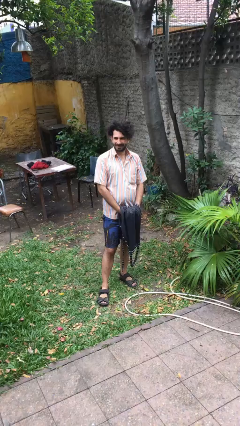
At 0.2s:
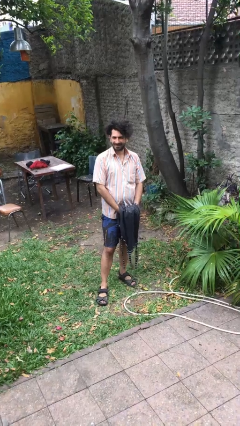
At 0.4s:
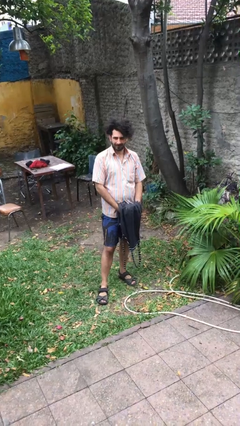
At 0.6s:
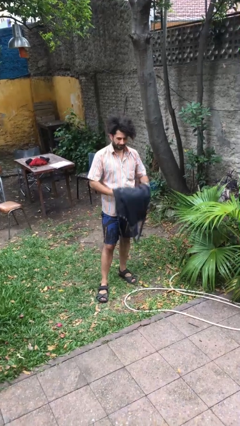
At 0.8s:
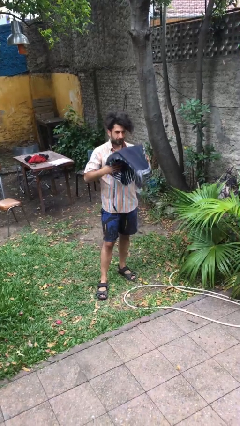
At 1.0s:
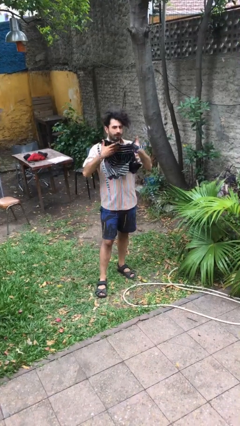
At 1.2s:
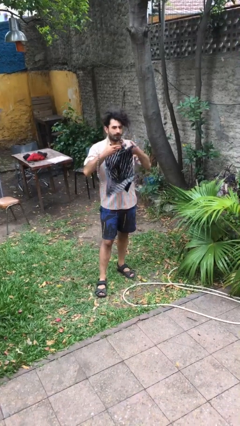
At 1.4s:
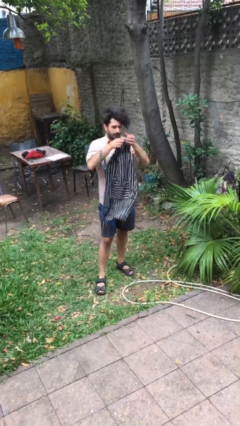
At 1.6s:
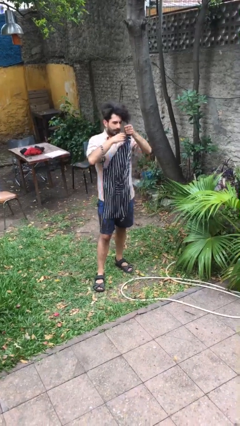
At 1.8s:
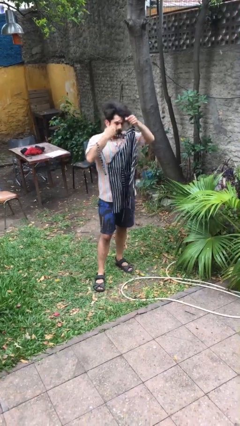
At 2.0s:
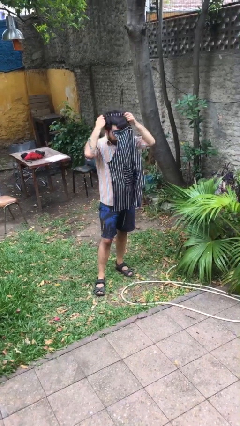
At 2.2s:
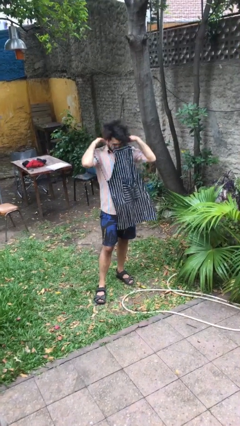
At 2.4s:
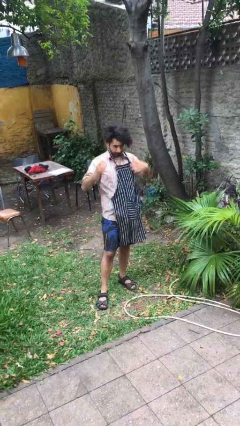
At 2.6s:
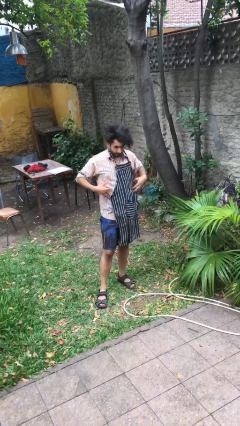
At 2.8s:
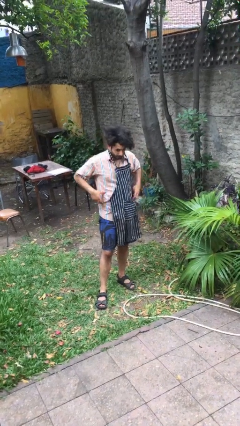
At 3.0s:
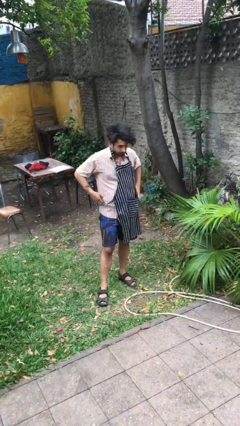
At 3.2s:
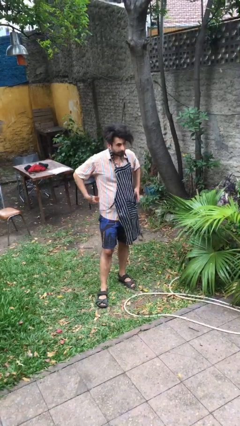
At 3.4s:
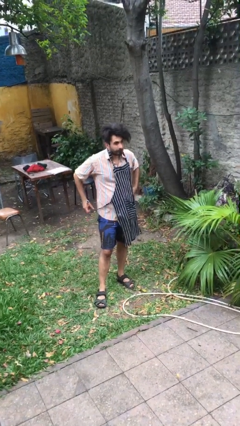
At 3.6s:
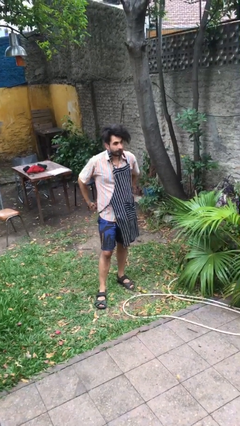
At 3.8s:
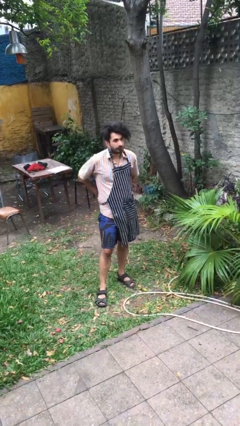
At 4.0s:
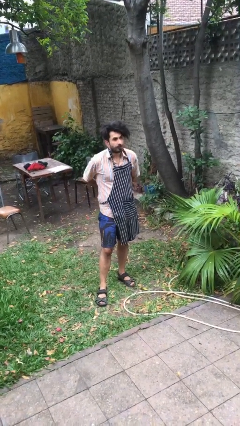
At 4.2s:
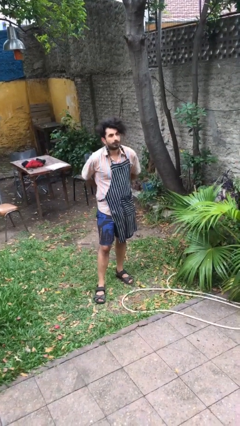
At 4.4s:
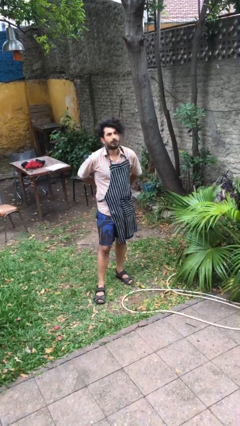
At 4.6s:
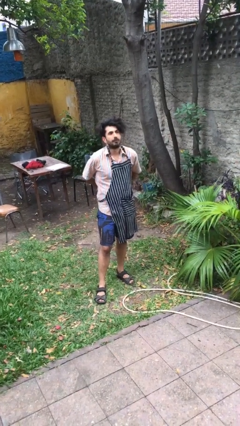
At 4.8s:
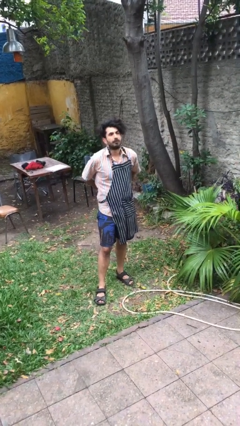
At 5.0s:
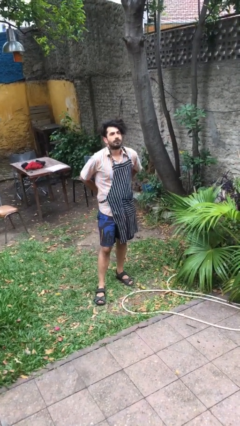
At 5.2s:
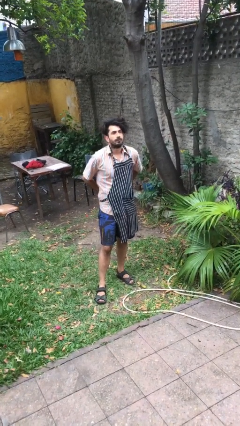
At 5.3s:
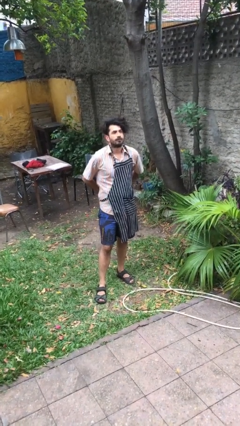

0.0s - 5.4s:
person puts on apron

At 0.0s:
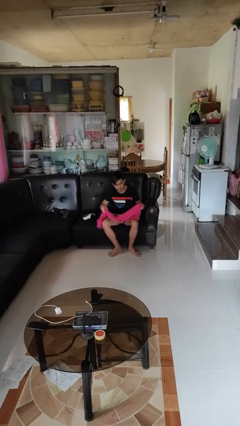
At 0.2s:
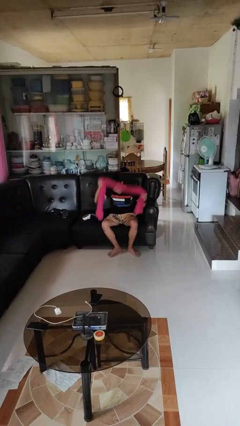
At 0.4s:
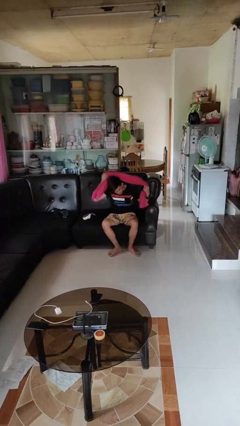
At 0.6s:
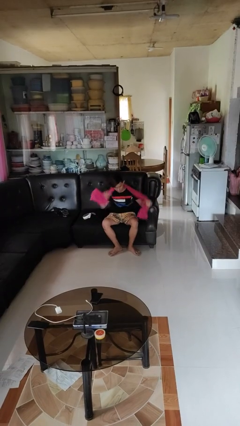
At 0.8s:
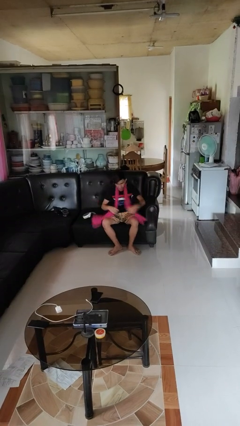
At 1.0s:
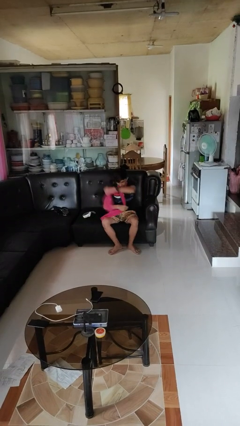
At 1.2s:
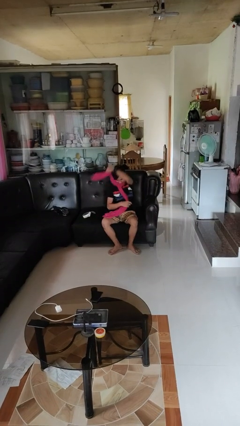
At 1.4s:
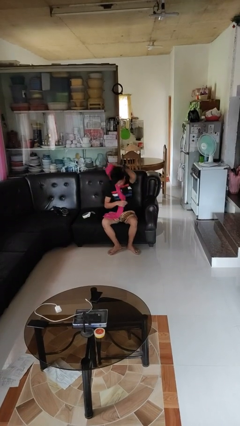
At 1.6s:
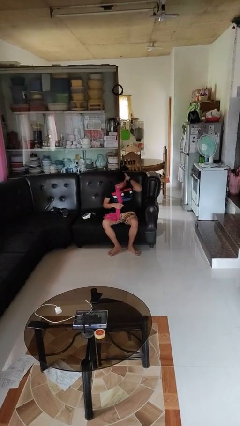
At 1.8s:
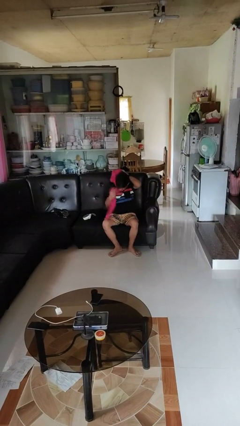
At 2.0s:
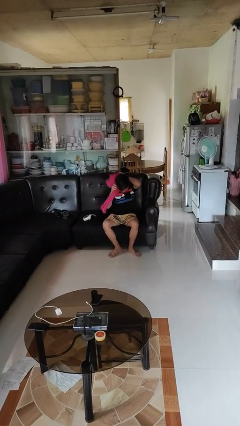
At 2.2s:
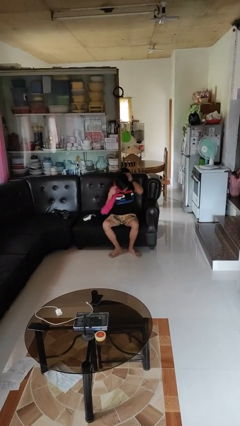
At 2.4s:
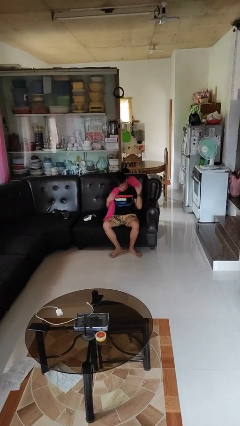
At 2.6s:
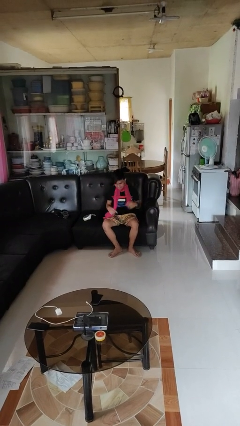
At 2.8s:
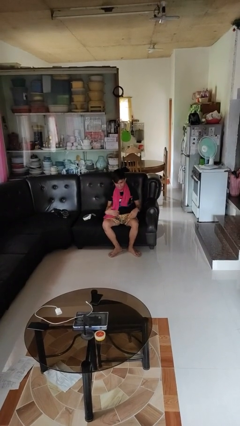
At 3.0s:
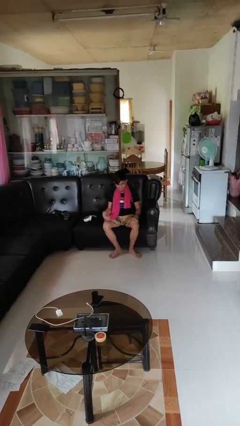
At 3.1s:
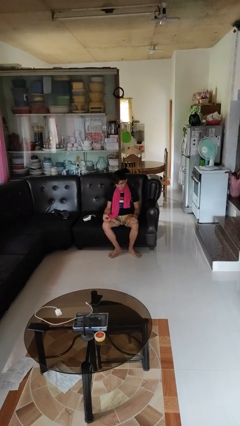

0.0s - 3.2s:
person puts on scarf

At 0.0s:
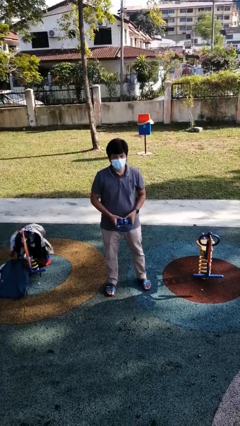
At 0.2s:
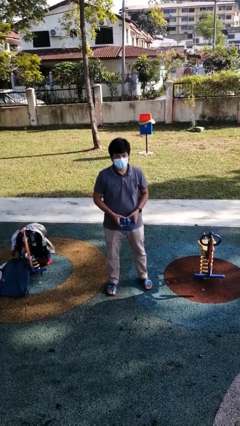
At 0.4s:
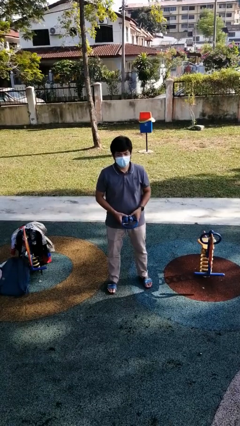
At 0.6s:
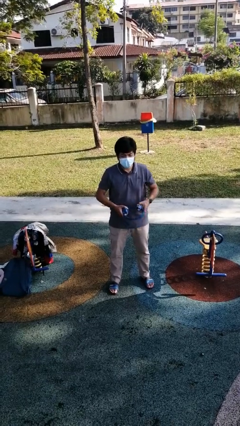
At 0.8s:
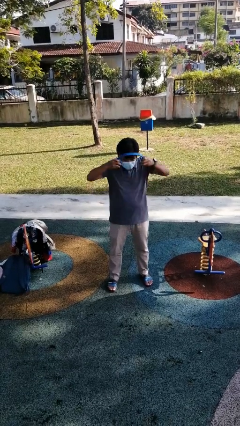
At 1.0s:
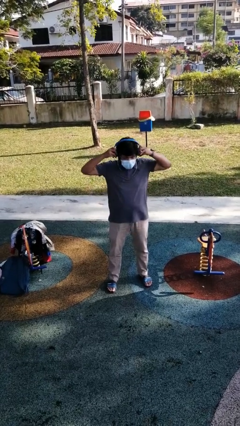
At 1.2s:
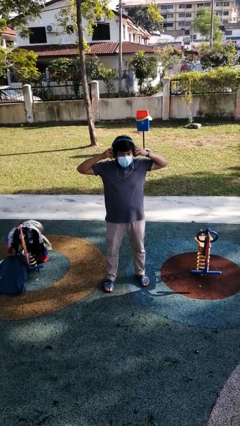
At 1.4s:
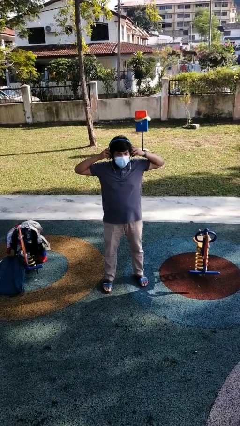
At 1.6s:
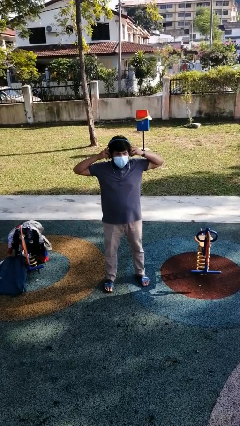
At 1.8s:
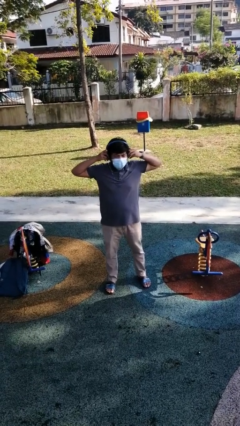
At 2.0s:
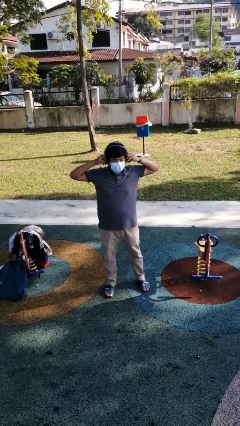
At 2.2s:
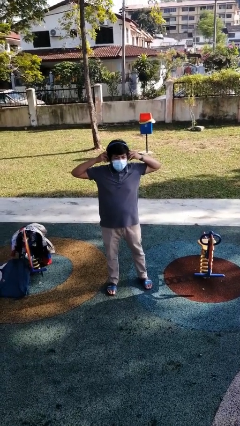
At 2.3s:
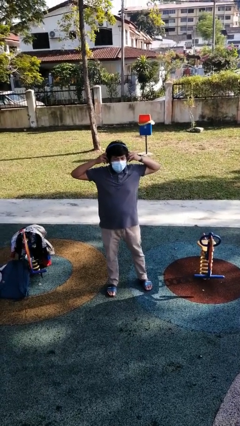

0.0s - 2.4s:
person puts on headphones

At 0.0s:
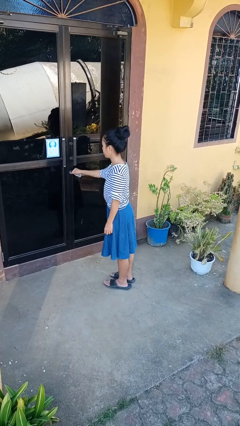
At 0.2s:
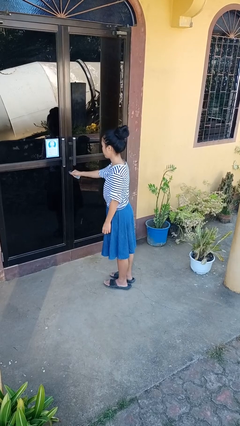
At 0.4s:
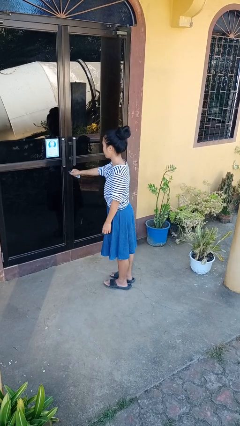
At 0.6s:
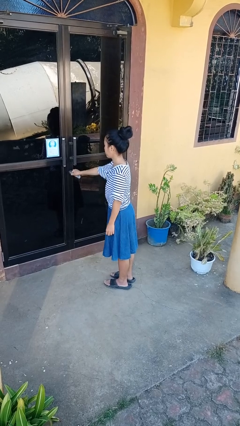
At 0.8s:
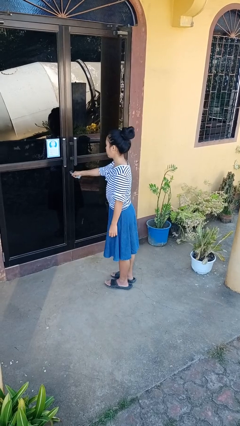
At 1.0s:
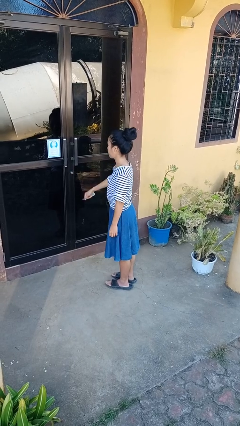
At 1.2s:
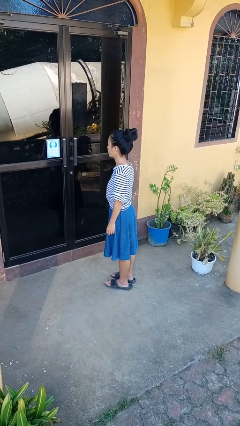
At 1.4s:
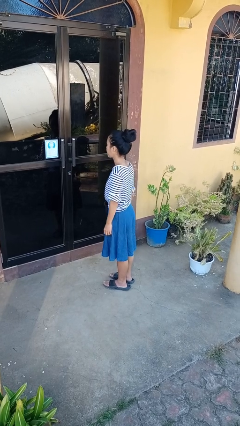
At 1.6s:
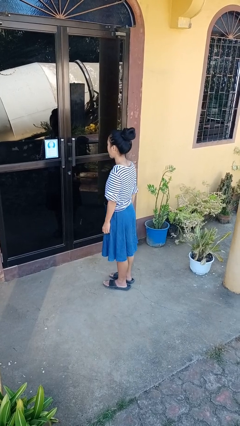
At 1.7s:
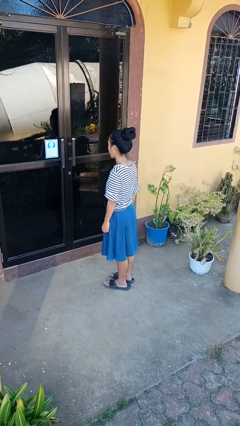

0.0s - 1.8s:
person locks door with keys

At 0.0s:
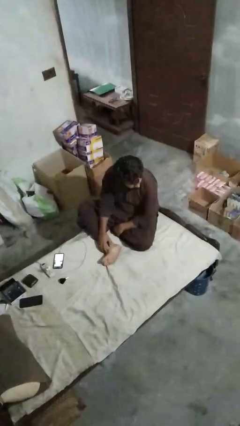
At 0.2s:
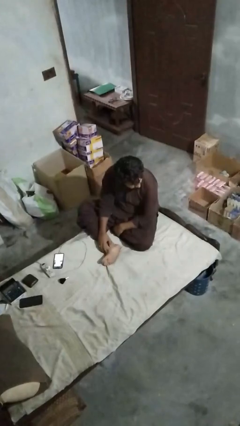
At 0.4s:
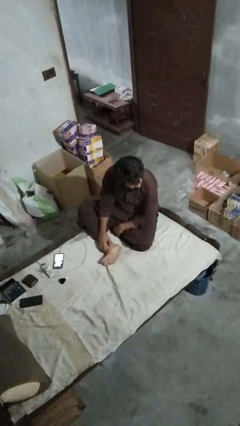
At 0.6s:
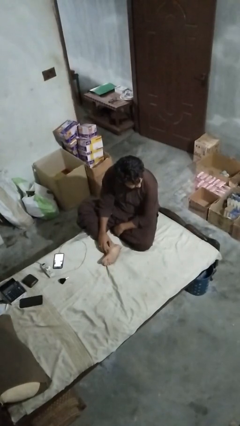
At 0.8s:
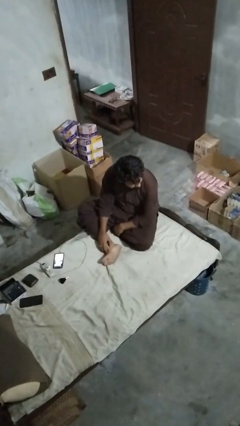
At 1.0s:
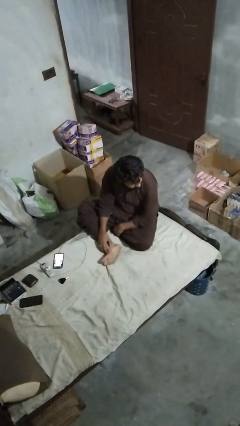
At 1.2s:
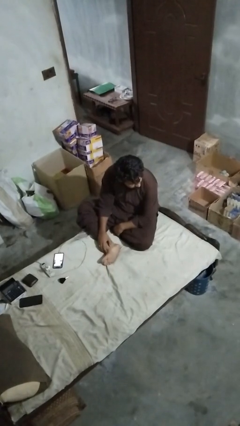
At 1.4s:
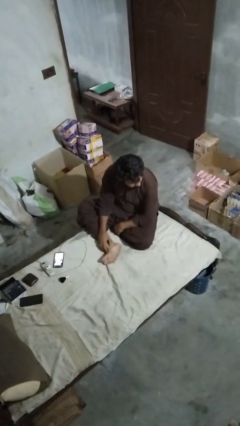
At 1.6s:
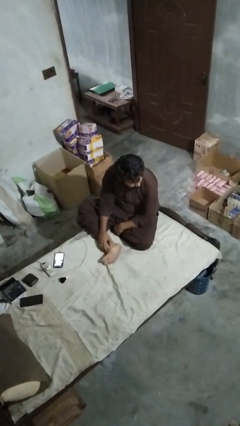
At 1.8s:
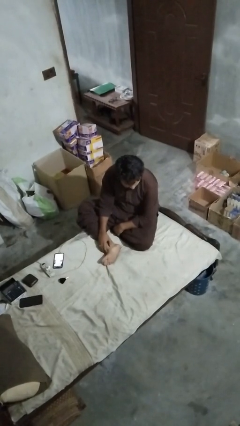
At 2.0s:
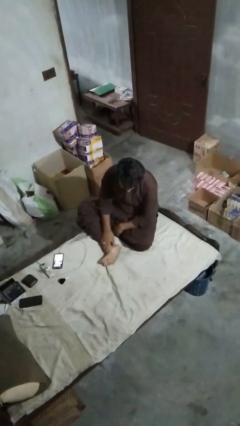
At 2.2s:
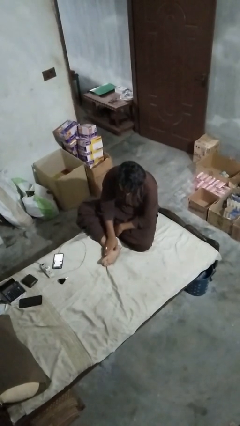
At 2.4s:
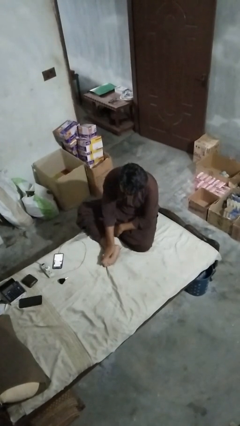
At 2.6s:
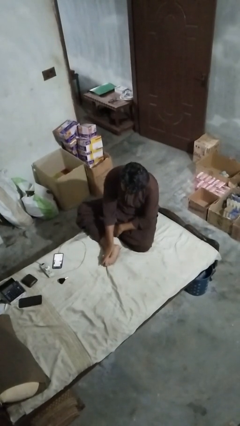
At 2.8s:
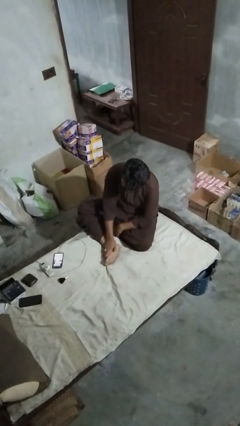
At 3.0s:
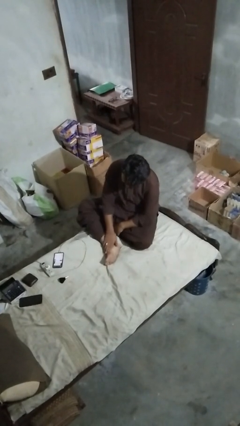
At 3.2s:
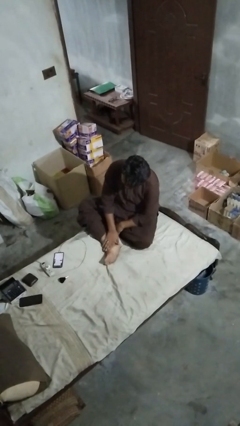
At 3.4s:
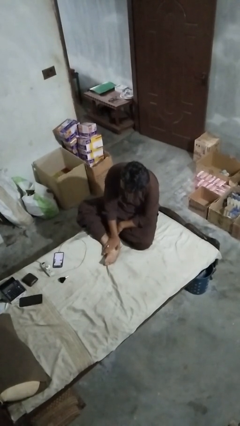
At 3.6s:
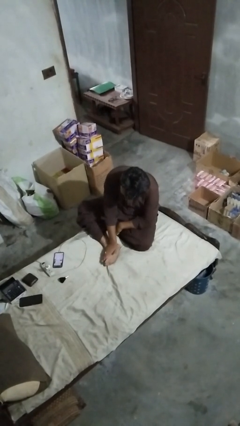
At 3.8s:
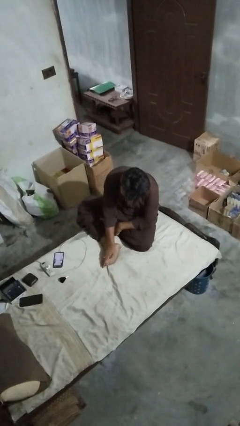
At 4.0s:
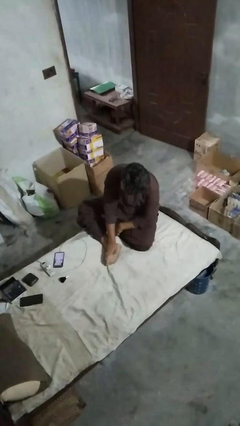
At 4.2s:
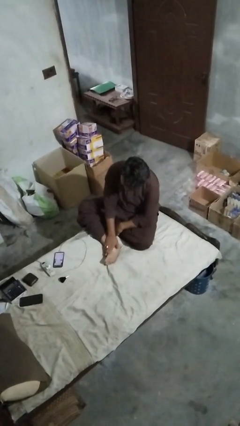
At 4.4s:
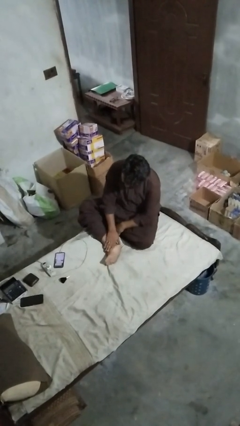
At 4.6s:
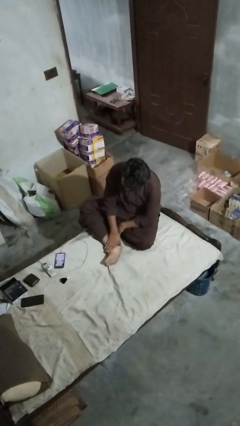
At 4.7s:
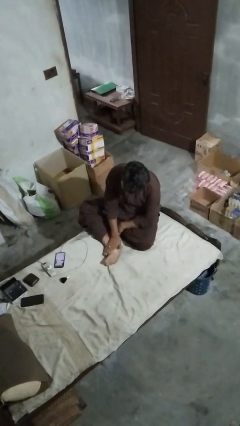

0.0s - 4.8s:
person rubs foot
